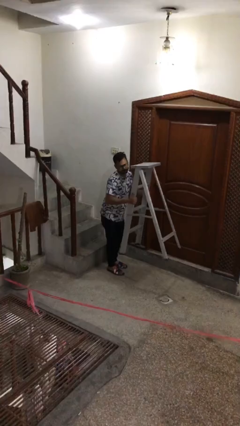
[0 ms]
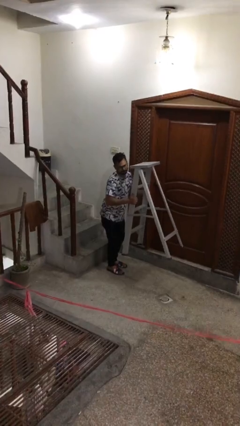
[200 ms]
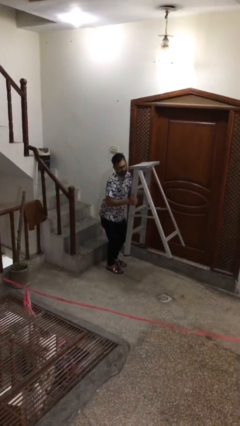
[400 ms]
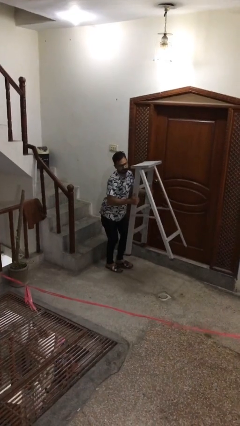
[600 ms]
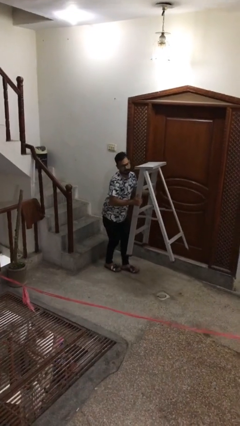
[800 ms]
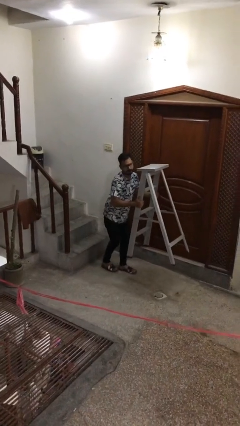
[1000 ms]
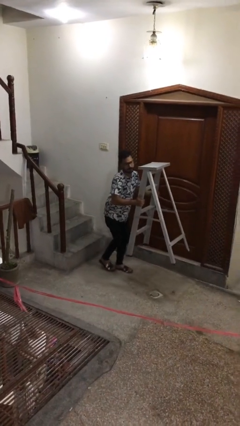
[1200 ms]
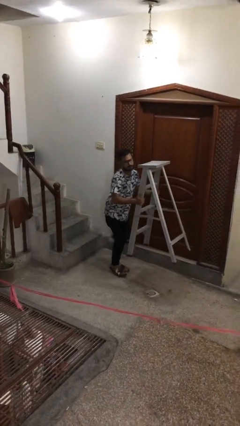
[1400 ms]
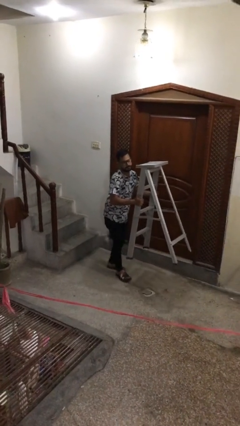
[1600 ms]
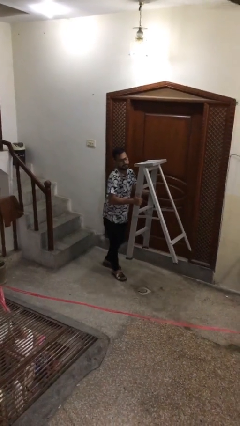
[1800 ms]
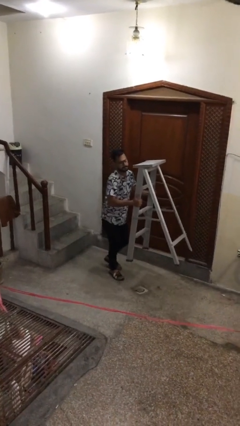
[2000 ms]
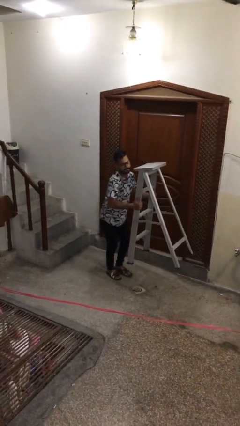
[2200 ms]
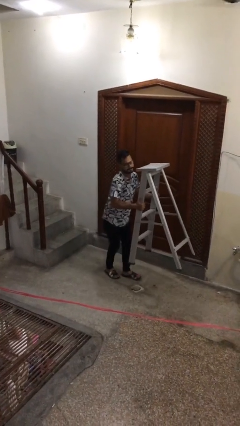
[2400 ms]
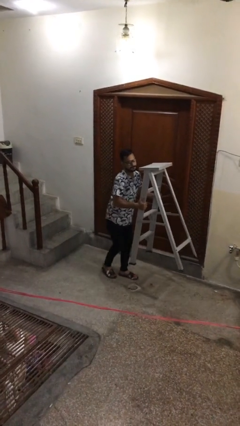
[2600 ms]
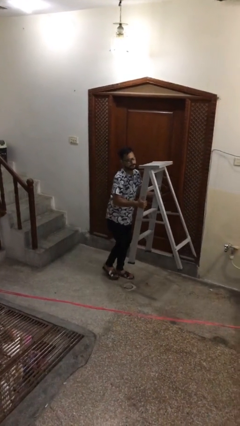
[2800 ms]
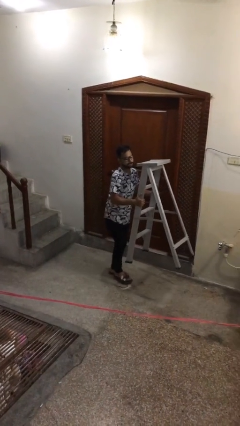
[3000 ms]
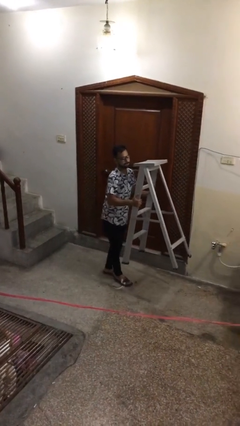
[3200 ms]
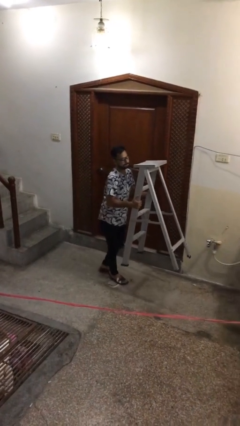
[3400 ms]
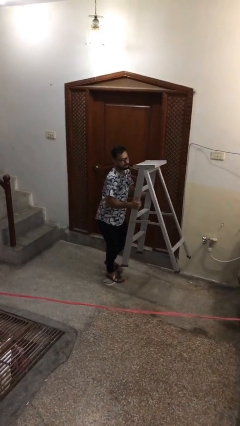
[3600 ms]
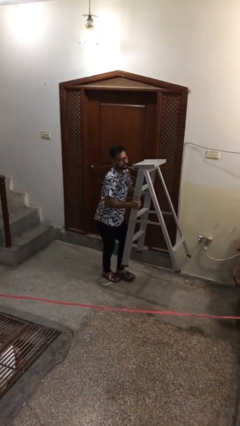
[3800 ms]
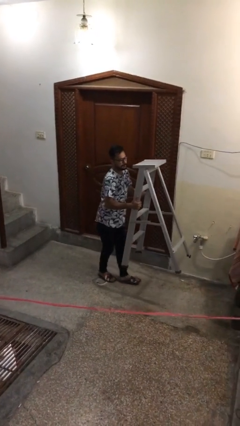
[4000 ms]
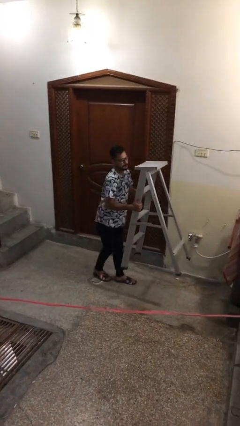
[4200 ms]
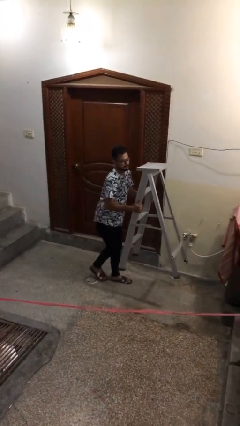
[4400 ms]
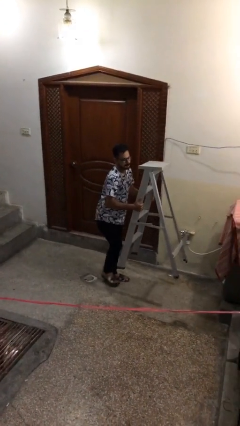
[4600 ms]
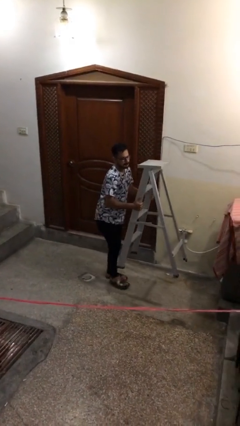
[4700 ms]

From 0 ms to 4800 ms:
person carries heavy object

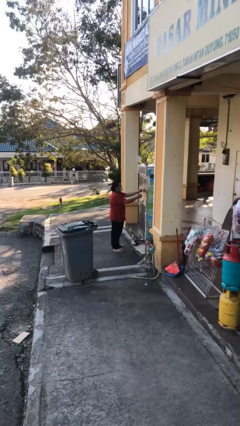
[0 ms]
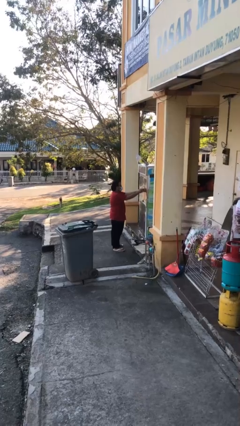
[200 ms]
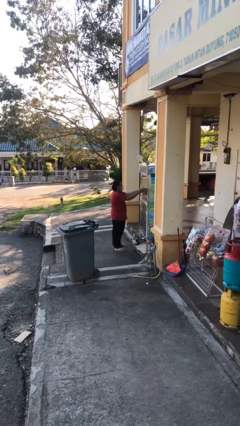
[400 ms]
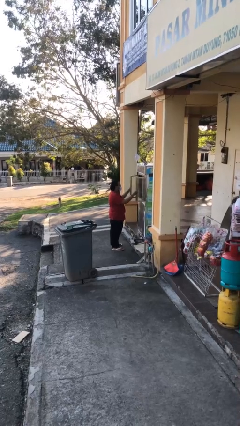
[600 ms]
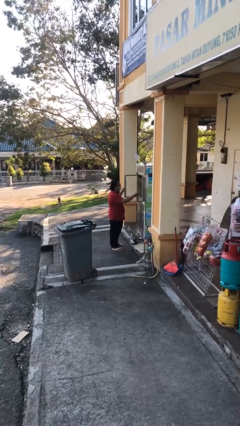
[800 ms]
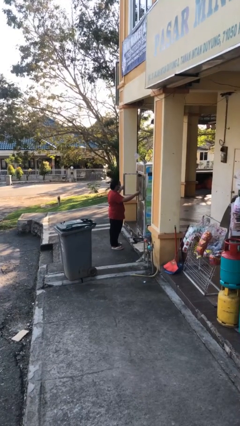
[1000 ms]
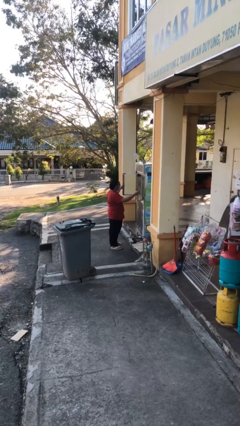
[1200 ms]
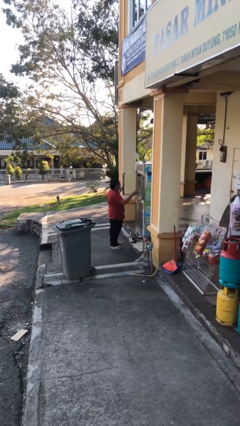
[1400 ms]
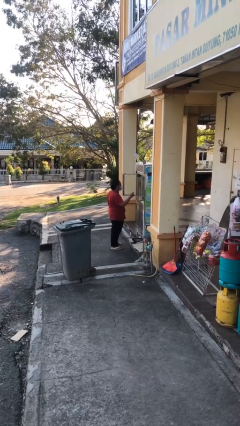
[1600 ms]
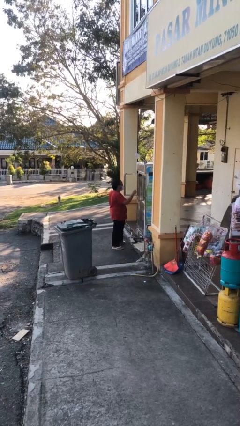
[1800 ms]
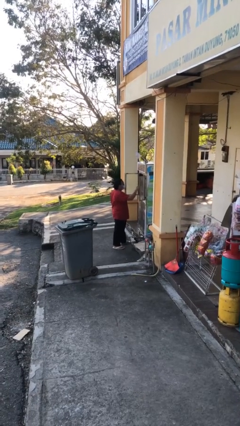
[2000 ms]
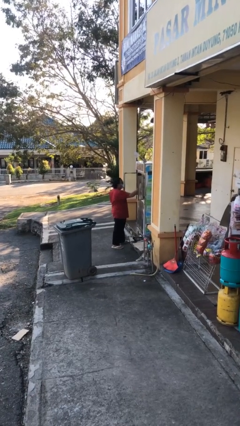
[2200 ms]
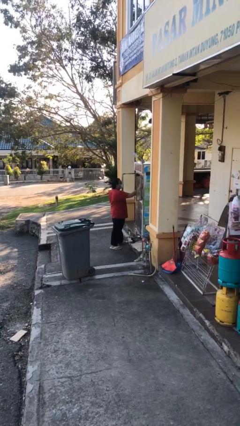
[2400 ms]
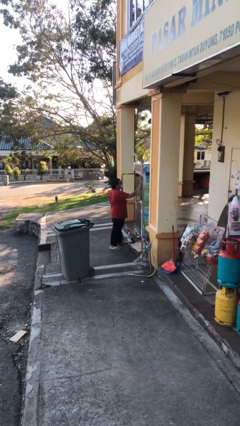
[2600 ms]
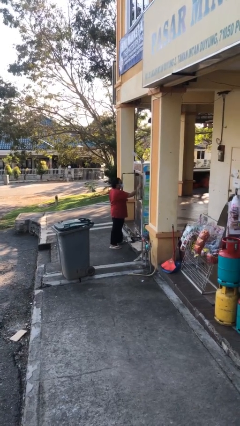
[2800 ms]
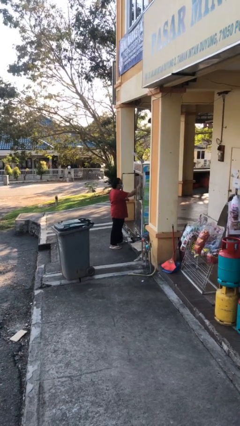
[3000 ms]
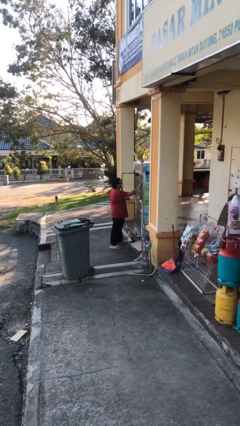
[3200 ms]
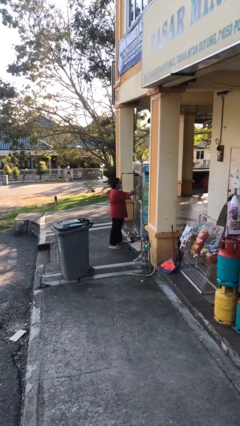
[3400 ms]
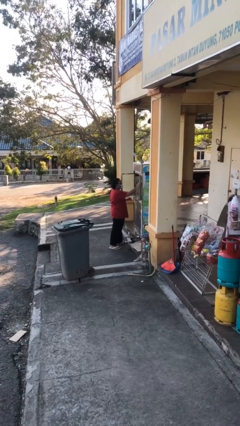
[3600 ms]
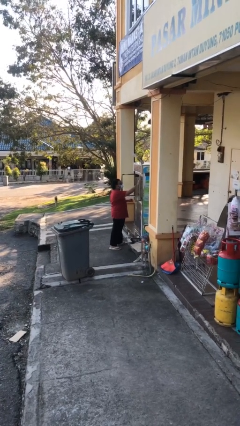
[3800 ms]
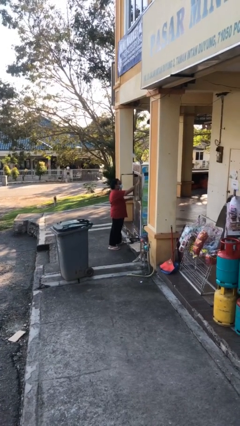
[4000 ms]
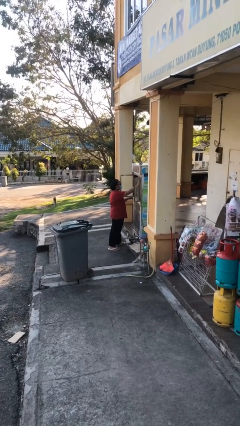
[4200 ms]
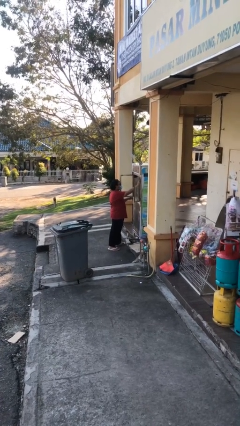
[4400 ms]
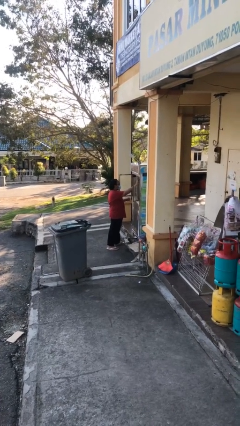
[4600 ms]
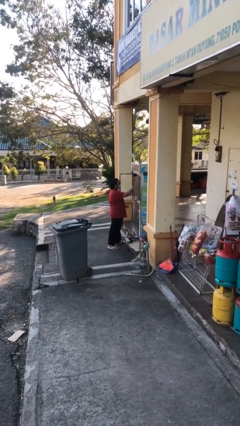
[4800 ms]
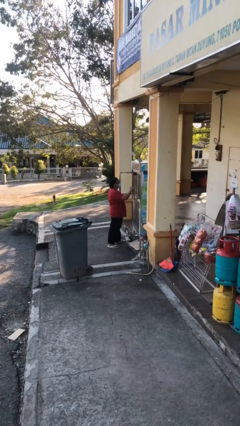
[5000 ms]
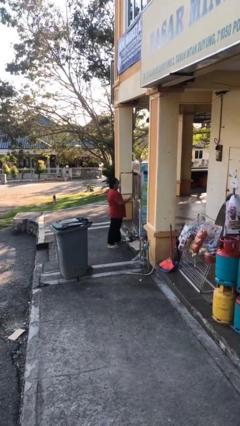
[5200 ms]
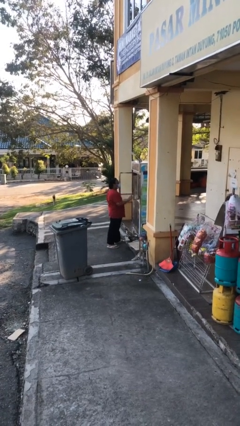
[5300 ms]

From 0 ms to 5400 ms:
person purchases from machine

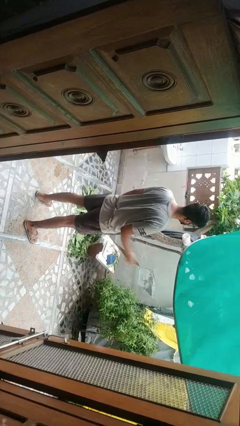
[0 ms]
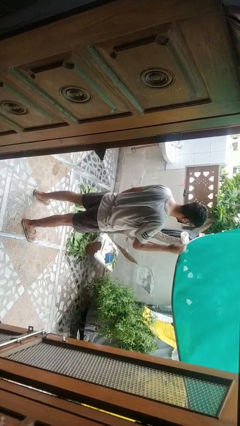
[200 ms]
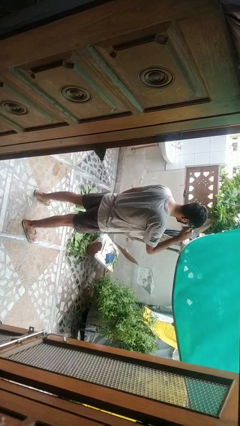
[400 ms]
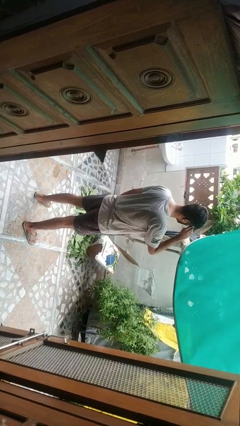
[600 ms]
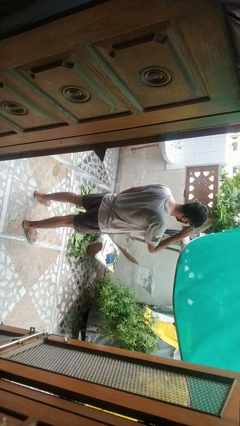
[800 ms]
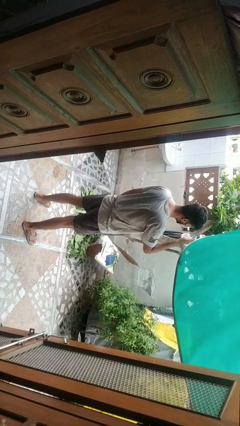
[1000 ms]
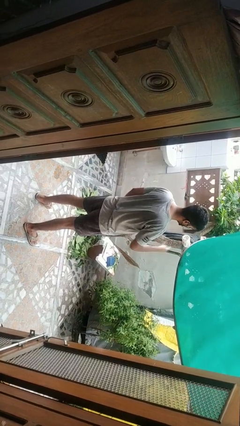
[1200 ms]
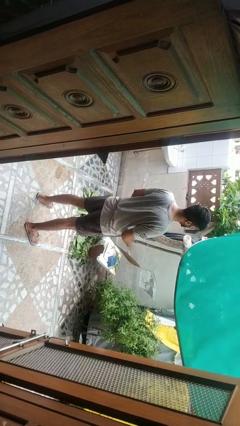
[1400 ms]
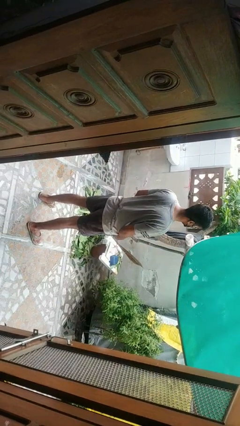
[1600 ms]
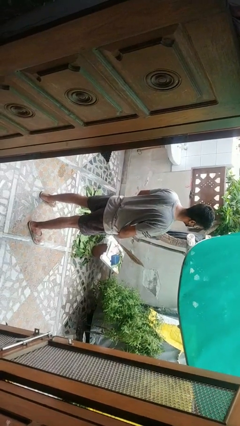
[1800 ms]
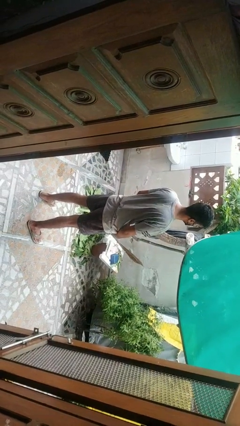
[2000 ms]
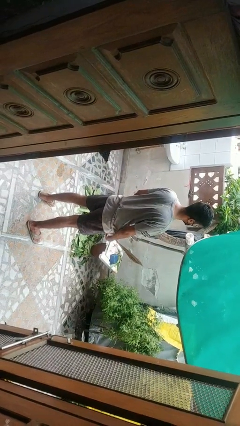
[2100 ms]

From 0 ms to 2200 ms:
person takes off glasses

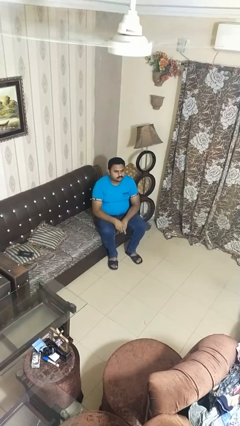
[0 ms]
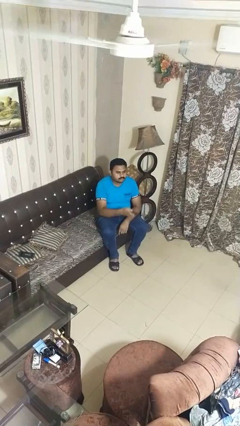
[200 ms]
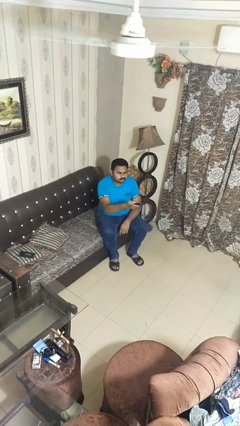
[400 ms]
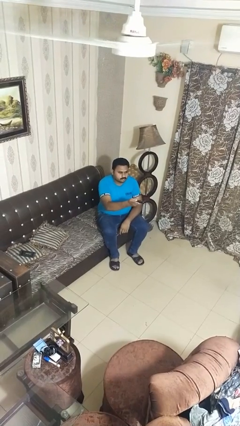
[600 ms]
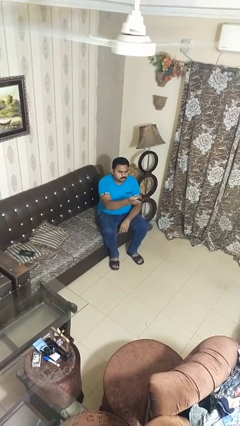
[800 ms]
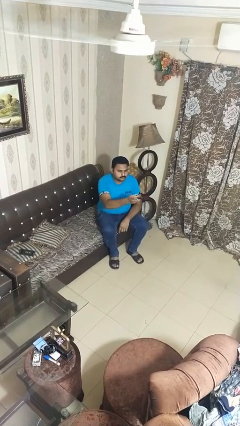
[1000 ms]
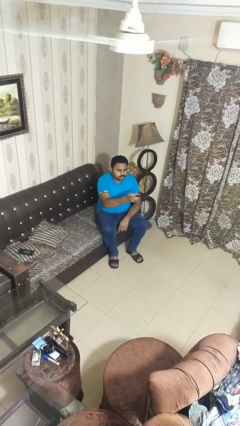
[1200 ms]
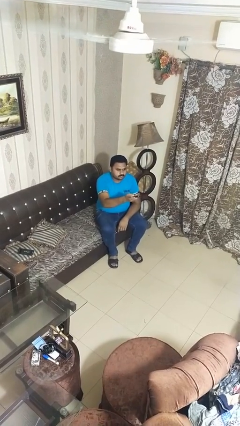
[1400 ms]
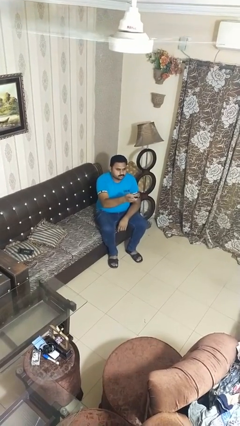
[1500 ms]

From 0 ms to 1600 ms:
person uses television remote

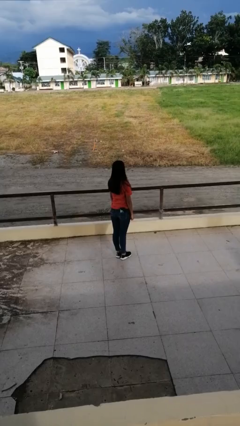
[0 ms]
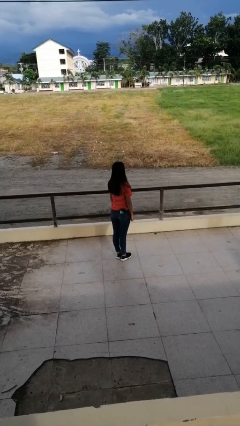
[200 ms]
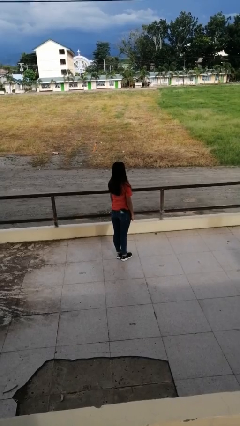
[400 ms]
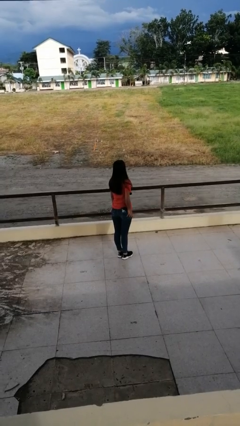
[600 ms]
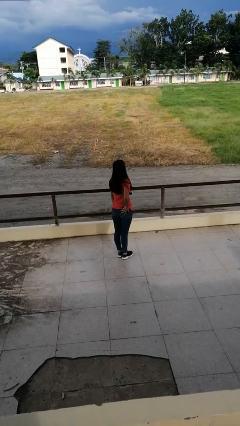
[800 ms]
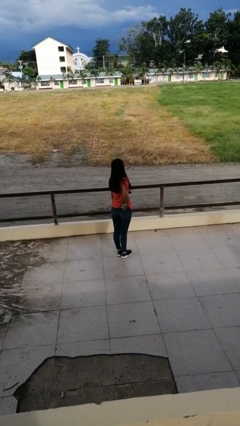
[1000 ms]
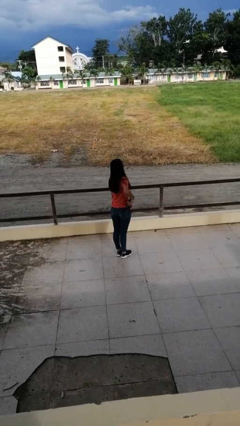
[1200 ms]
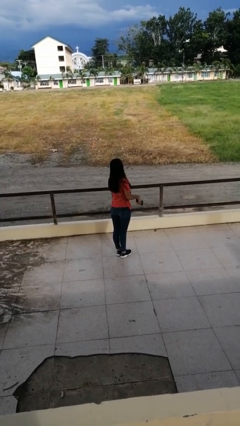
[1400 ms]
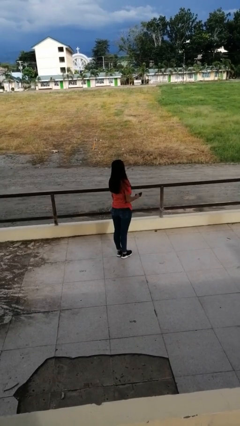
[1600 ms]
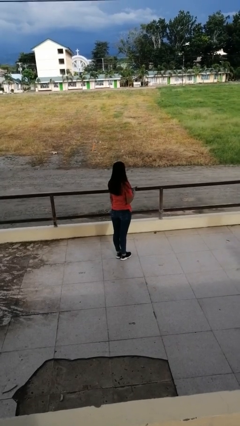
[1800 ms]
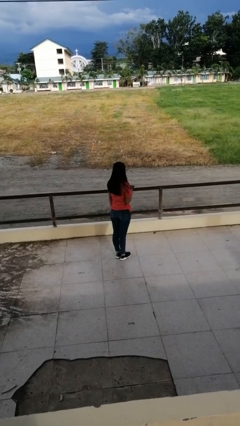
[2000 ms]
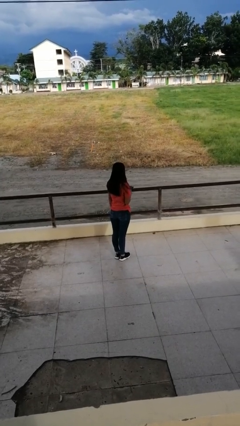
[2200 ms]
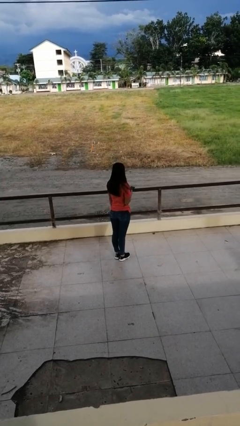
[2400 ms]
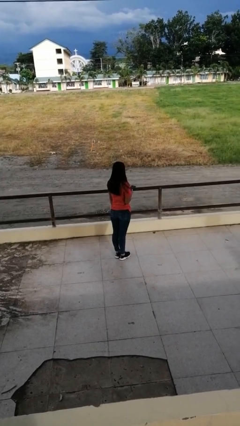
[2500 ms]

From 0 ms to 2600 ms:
person takes phone from pocket

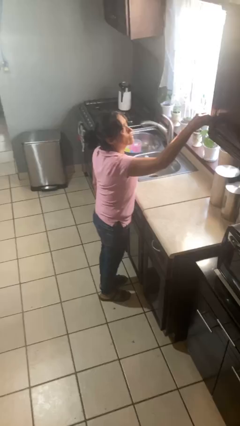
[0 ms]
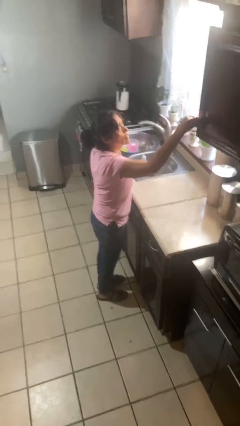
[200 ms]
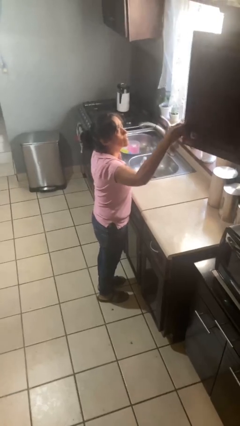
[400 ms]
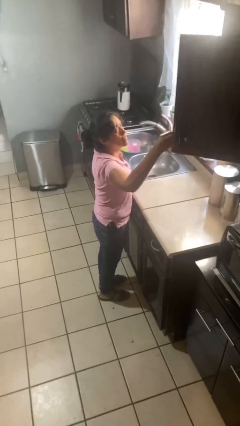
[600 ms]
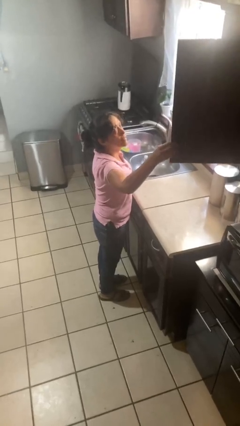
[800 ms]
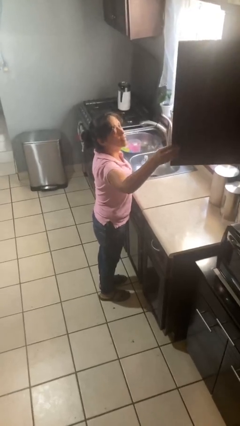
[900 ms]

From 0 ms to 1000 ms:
person opens cabinet

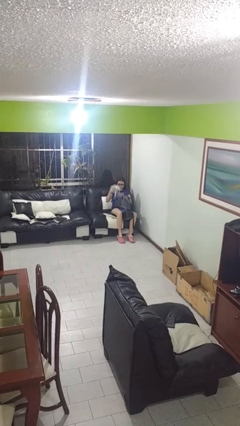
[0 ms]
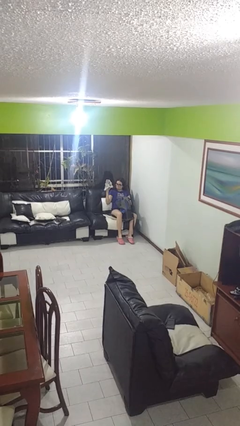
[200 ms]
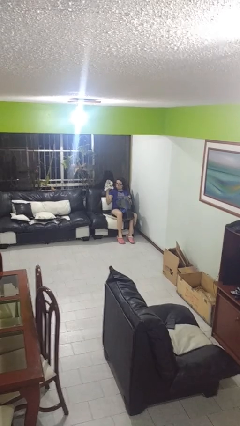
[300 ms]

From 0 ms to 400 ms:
person takes object from backpack
